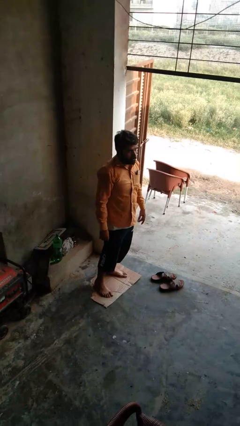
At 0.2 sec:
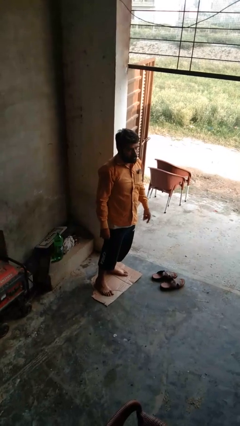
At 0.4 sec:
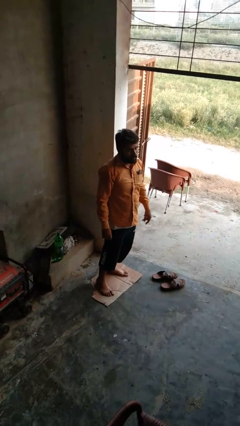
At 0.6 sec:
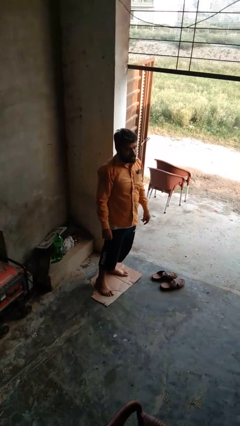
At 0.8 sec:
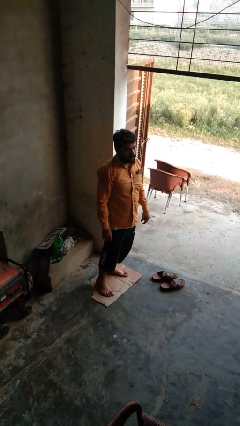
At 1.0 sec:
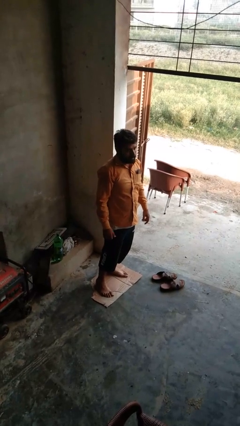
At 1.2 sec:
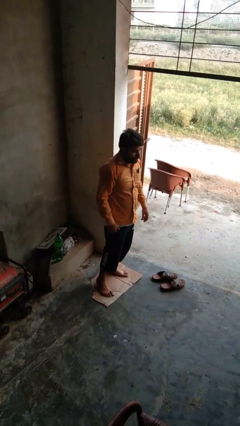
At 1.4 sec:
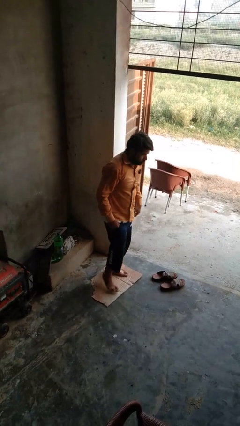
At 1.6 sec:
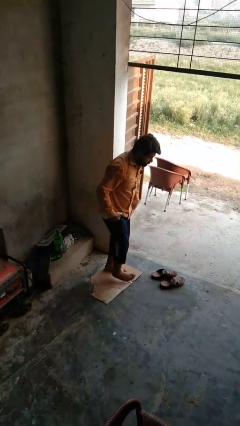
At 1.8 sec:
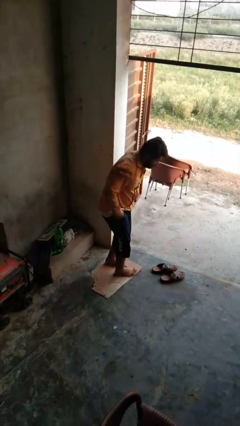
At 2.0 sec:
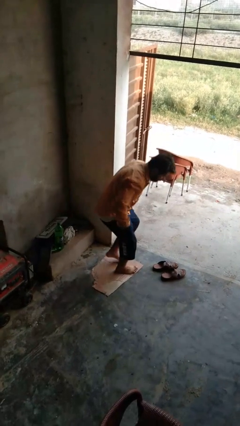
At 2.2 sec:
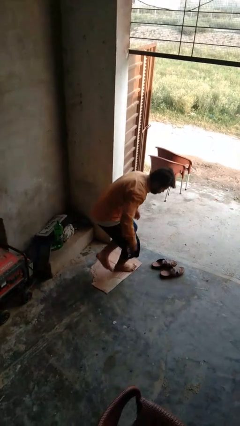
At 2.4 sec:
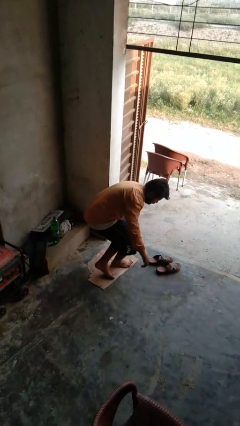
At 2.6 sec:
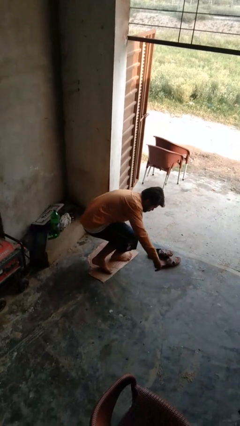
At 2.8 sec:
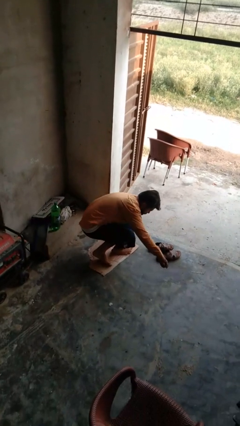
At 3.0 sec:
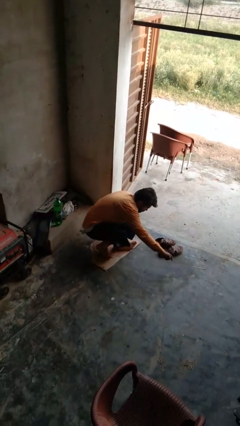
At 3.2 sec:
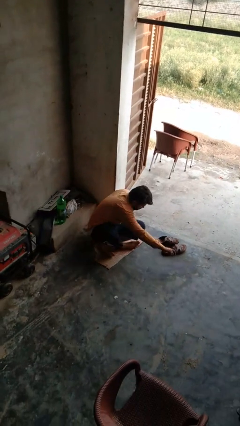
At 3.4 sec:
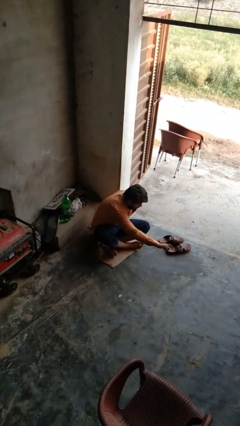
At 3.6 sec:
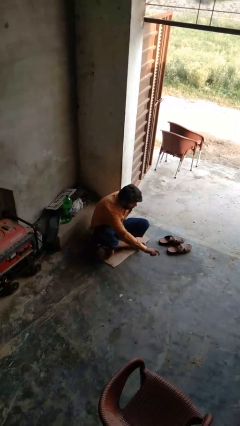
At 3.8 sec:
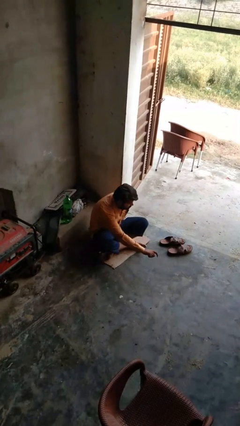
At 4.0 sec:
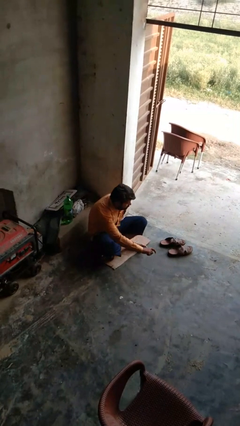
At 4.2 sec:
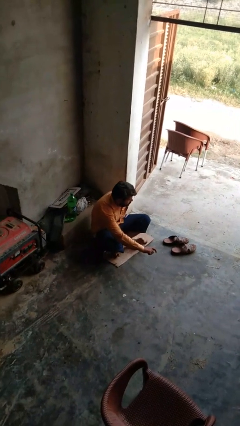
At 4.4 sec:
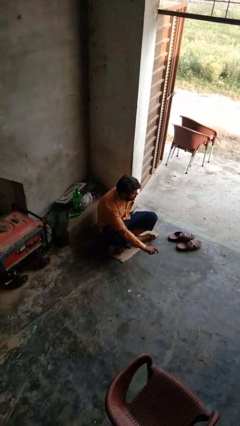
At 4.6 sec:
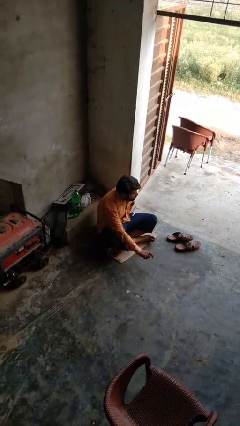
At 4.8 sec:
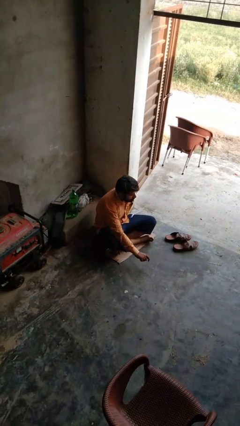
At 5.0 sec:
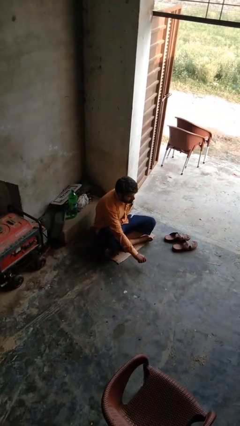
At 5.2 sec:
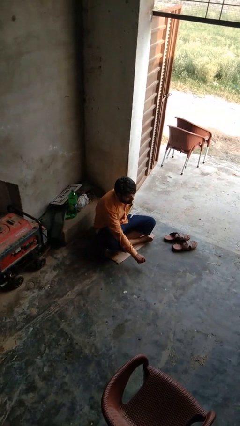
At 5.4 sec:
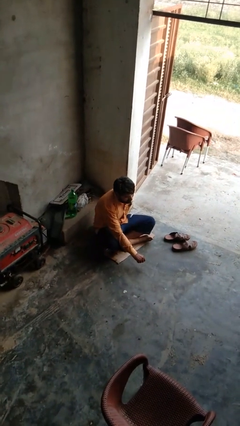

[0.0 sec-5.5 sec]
person sits crisscross

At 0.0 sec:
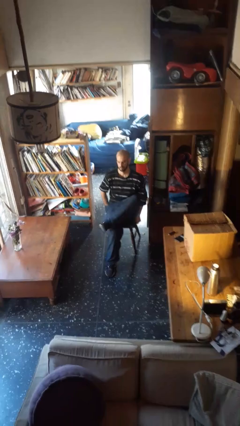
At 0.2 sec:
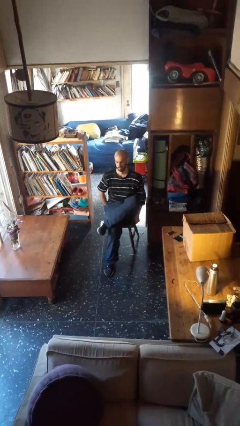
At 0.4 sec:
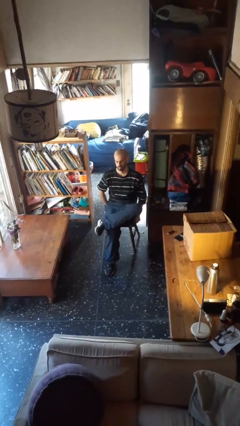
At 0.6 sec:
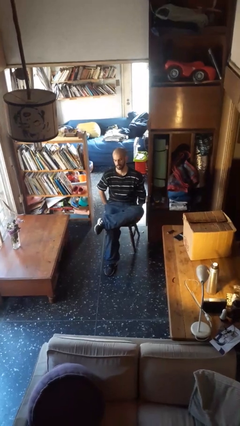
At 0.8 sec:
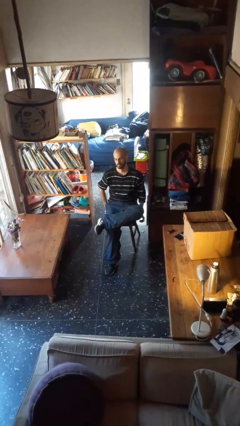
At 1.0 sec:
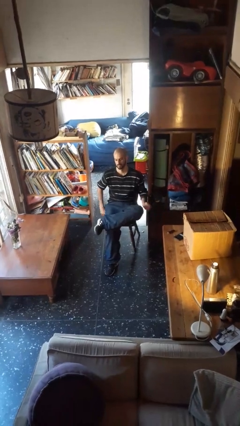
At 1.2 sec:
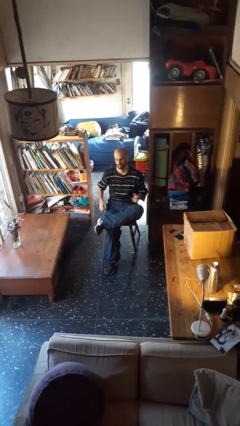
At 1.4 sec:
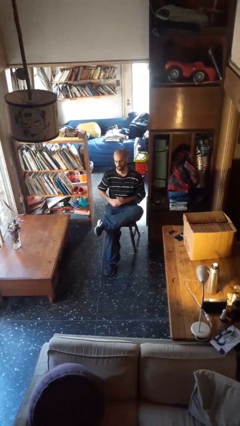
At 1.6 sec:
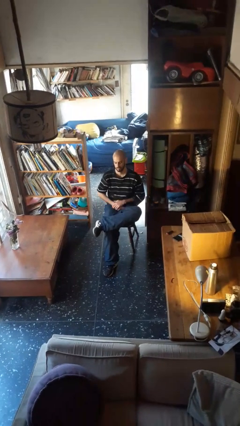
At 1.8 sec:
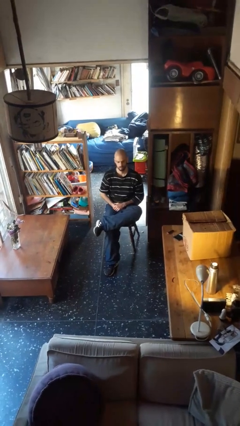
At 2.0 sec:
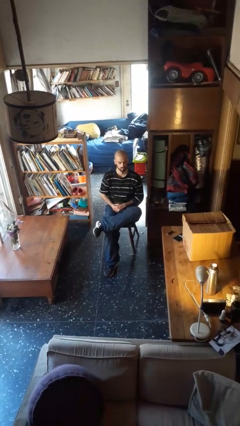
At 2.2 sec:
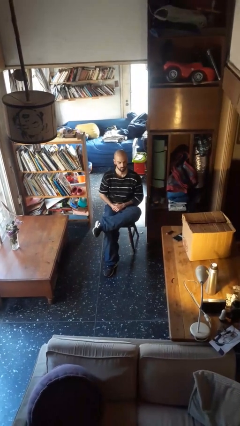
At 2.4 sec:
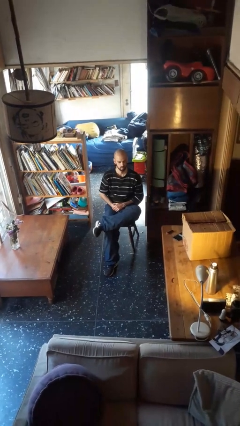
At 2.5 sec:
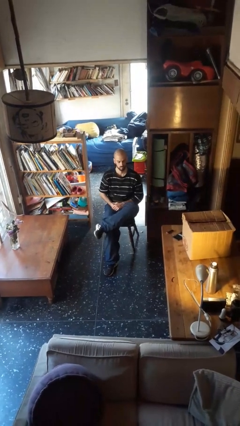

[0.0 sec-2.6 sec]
person crosses legs

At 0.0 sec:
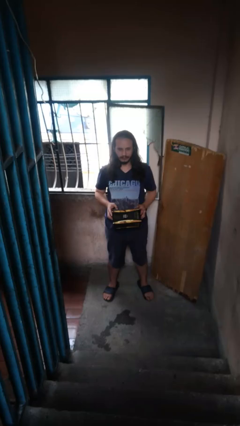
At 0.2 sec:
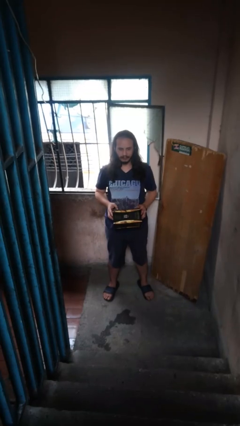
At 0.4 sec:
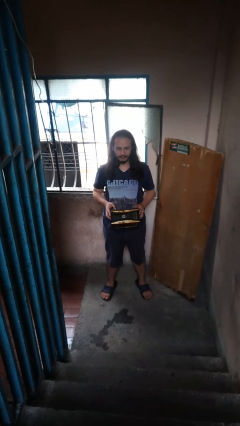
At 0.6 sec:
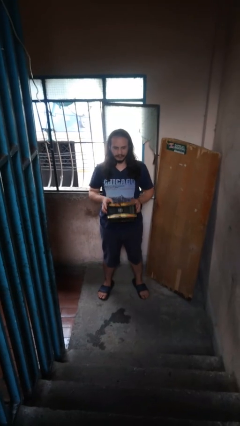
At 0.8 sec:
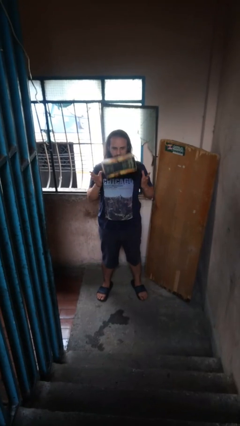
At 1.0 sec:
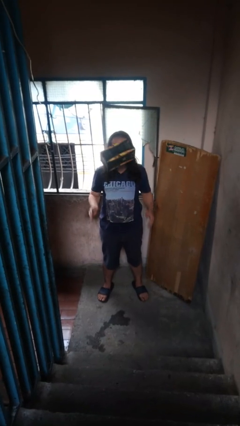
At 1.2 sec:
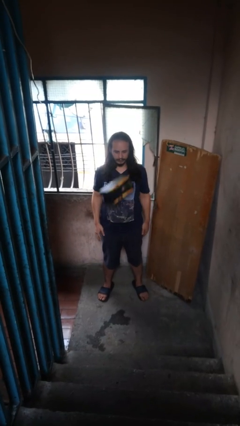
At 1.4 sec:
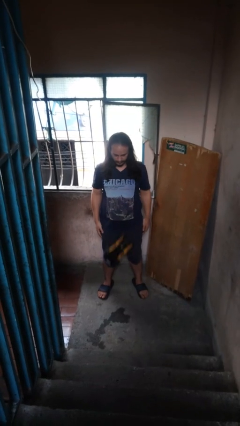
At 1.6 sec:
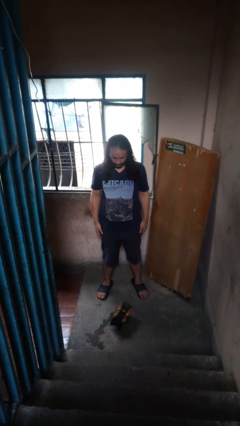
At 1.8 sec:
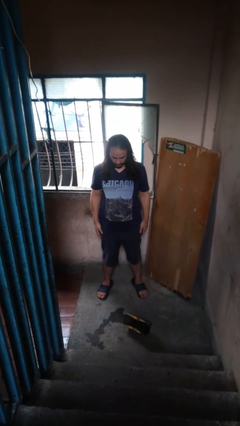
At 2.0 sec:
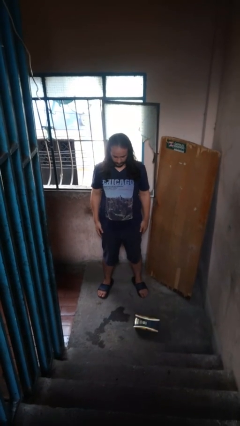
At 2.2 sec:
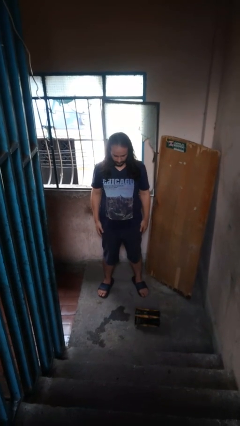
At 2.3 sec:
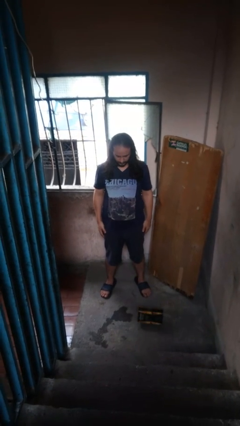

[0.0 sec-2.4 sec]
person throws object into air

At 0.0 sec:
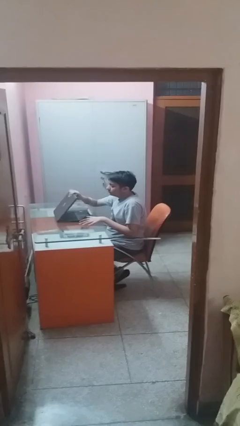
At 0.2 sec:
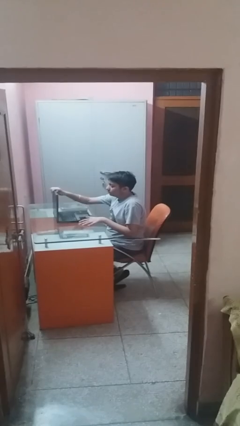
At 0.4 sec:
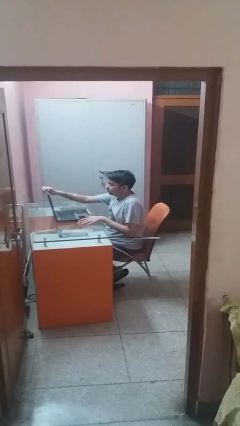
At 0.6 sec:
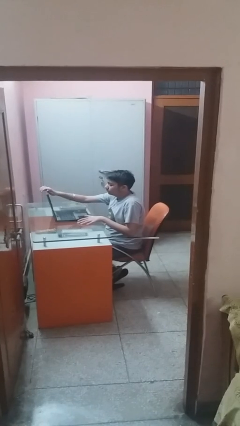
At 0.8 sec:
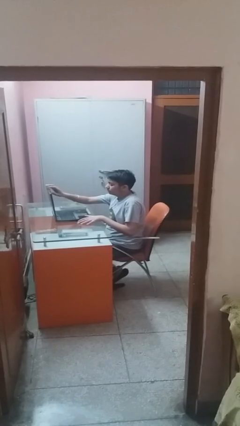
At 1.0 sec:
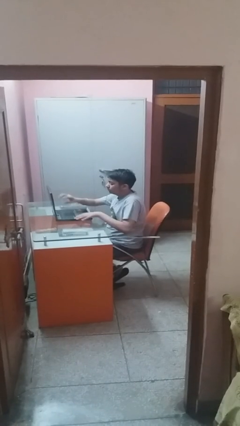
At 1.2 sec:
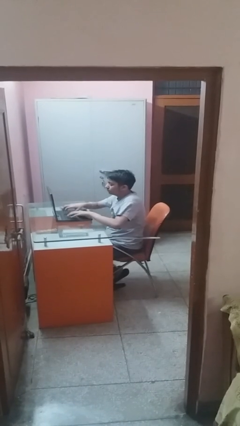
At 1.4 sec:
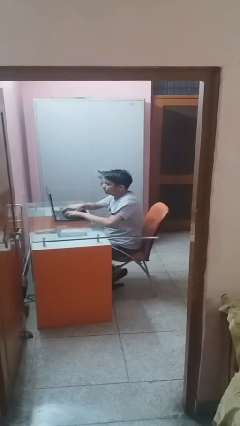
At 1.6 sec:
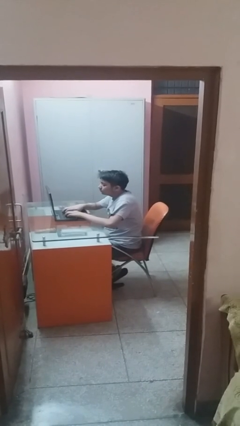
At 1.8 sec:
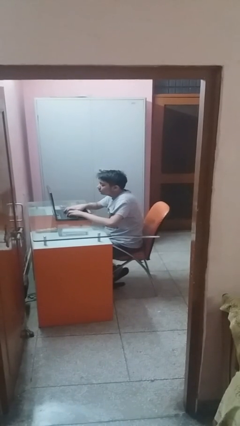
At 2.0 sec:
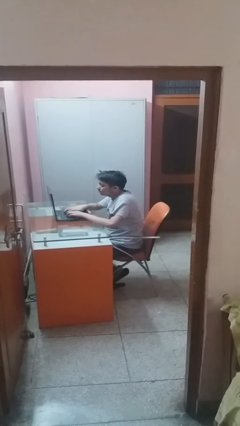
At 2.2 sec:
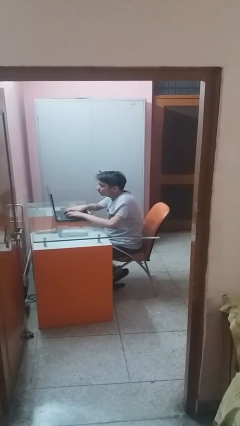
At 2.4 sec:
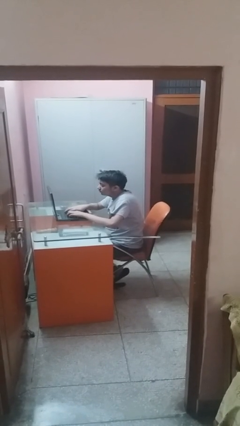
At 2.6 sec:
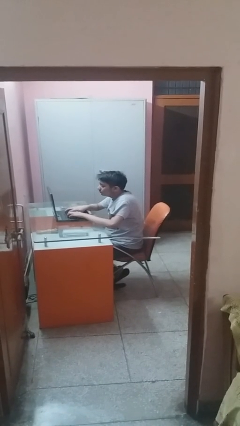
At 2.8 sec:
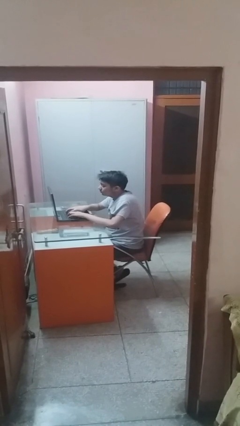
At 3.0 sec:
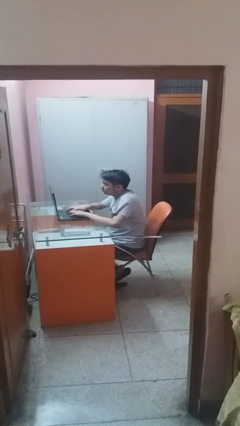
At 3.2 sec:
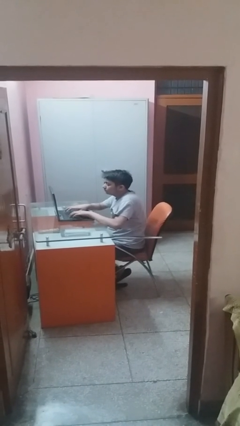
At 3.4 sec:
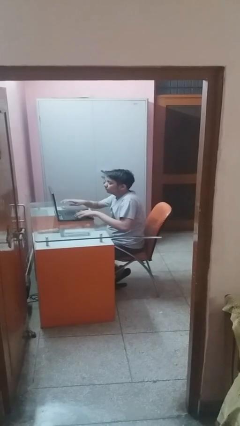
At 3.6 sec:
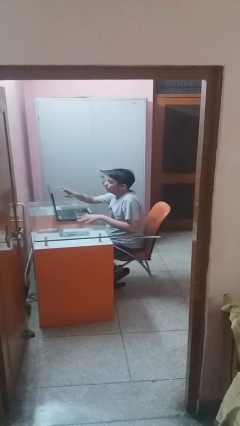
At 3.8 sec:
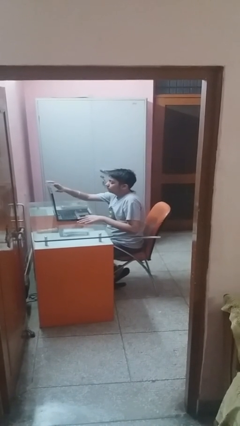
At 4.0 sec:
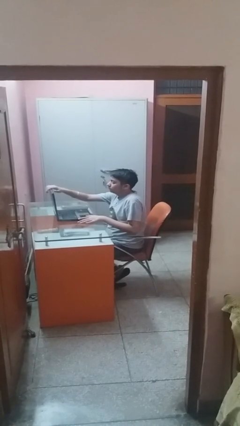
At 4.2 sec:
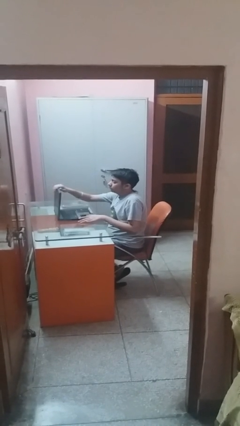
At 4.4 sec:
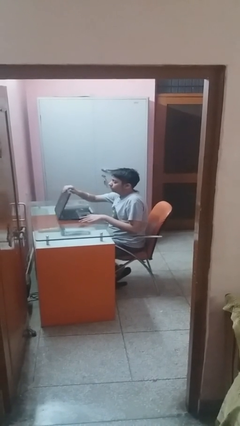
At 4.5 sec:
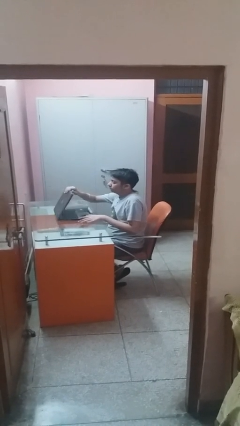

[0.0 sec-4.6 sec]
person interacts with laptop

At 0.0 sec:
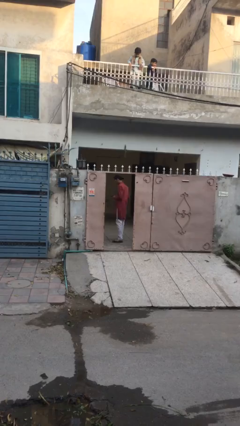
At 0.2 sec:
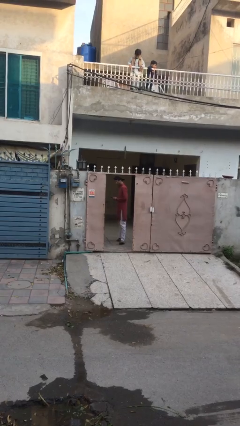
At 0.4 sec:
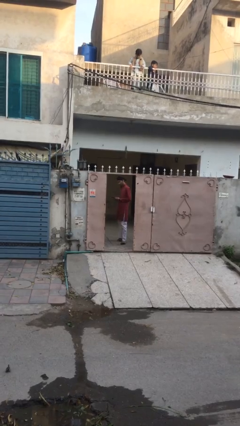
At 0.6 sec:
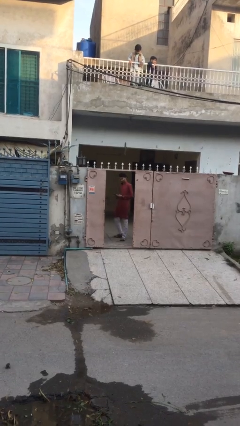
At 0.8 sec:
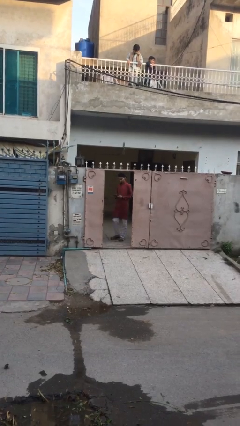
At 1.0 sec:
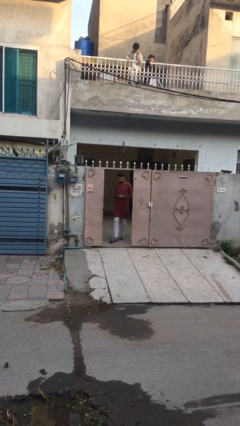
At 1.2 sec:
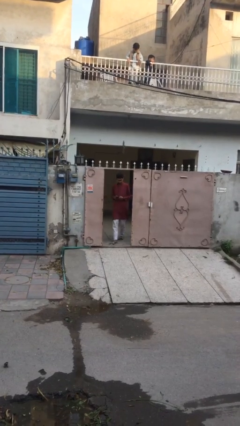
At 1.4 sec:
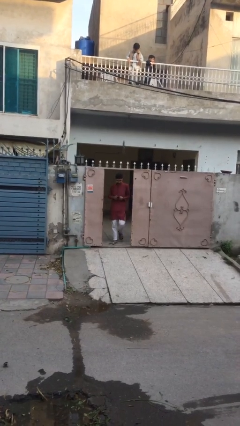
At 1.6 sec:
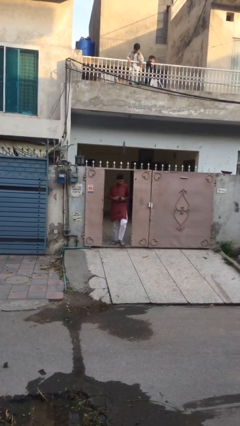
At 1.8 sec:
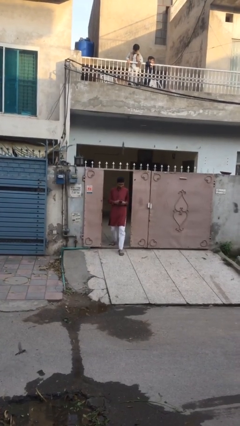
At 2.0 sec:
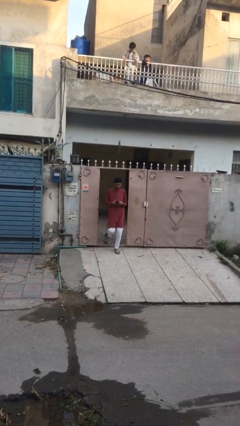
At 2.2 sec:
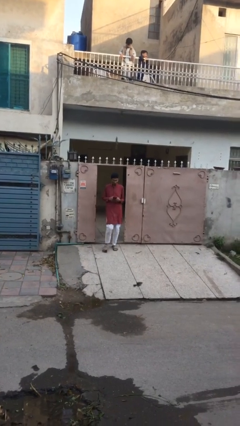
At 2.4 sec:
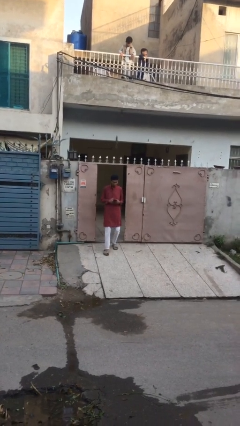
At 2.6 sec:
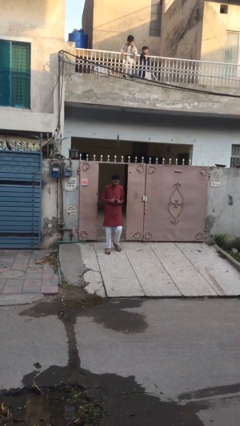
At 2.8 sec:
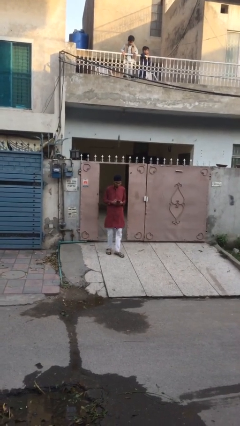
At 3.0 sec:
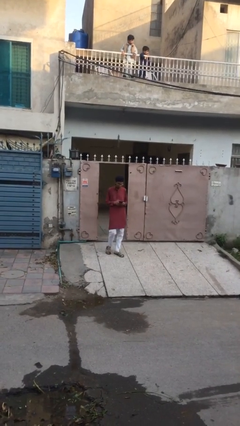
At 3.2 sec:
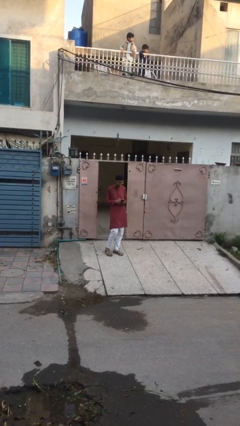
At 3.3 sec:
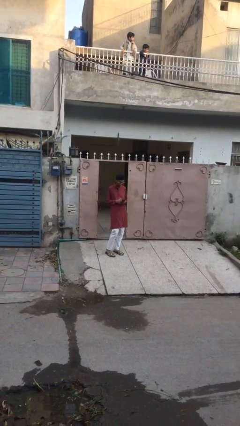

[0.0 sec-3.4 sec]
person exits scene through structure
